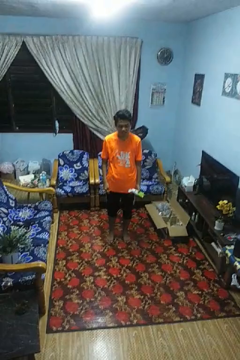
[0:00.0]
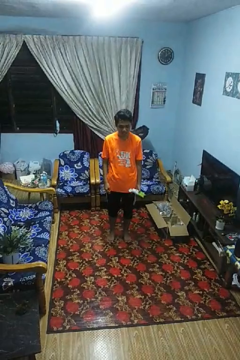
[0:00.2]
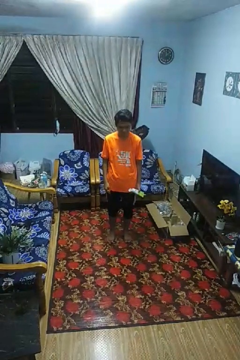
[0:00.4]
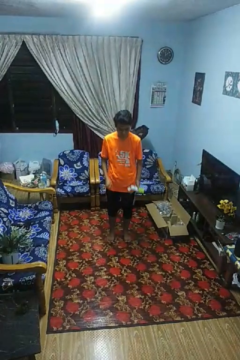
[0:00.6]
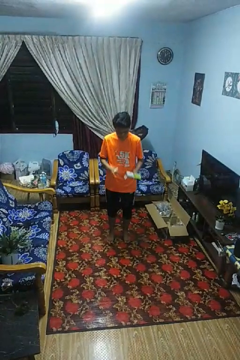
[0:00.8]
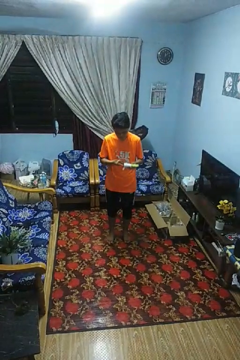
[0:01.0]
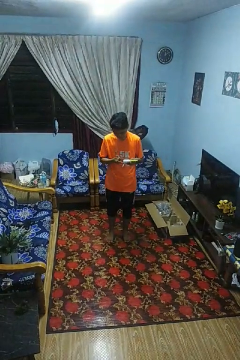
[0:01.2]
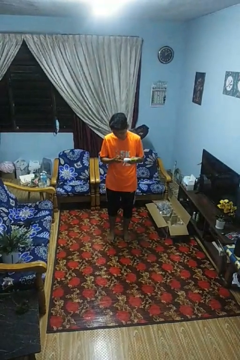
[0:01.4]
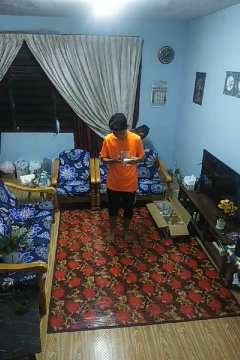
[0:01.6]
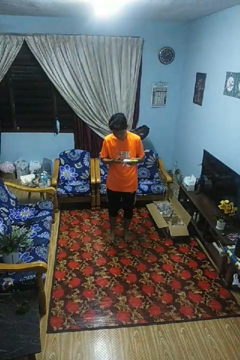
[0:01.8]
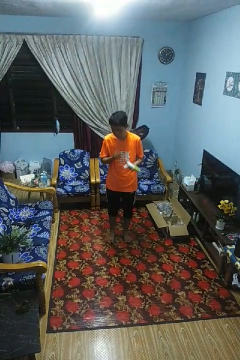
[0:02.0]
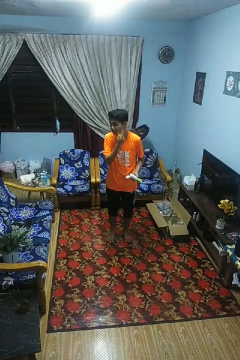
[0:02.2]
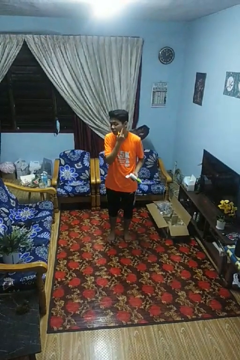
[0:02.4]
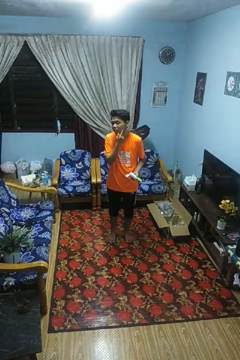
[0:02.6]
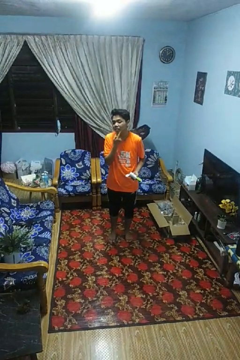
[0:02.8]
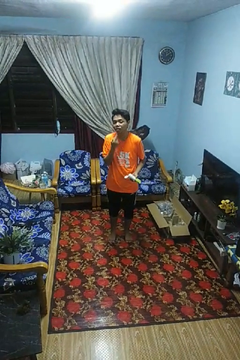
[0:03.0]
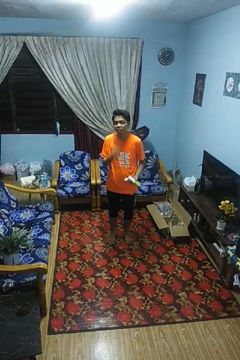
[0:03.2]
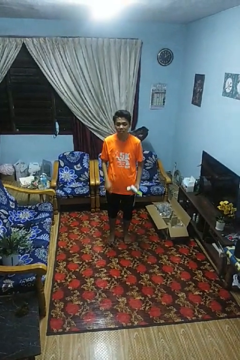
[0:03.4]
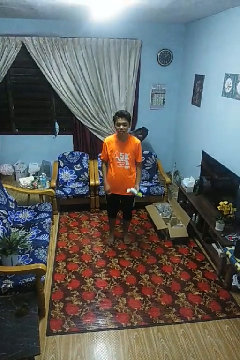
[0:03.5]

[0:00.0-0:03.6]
person applies shaving cream

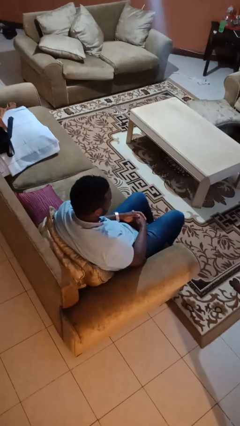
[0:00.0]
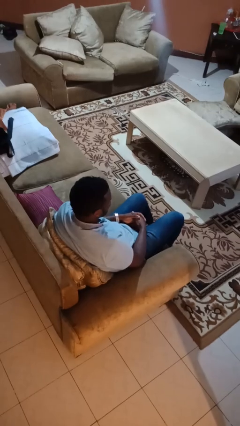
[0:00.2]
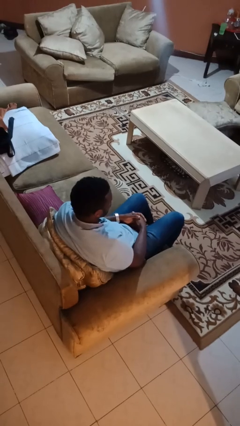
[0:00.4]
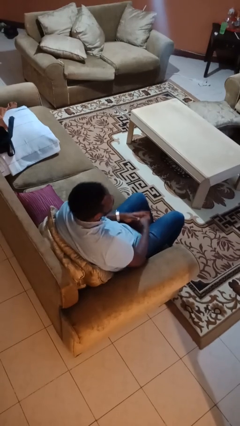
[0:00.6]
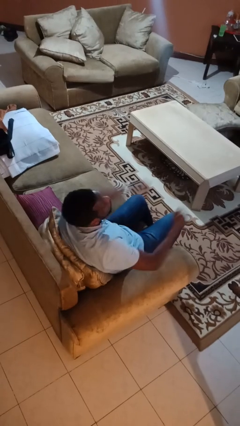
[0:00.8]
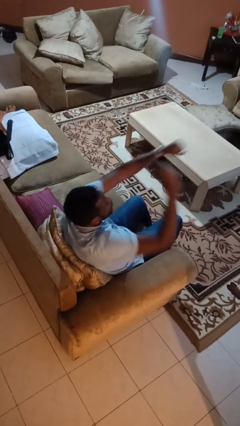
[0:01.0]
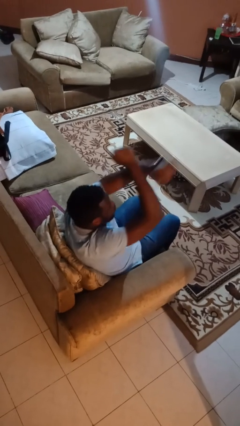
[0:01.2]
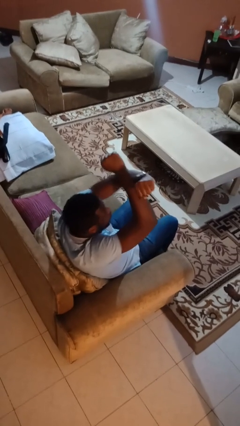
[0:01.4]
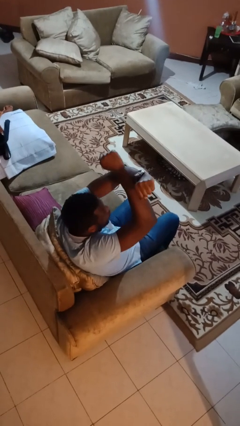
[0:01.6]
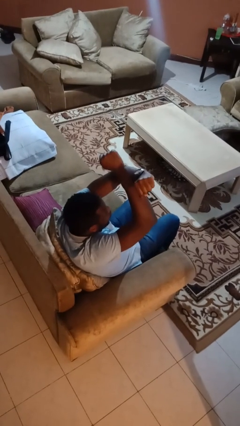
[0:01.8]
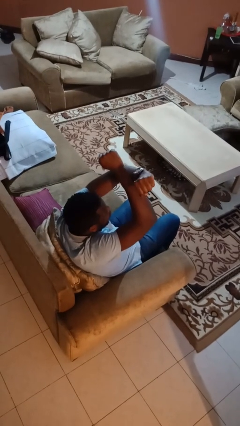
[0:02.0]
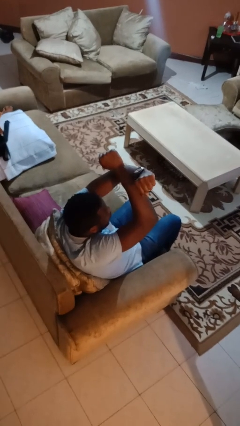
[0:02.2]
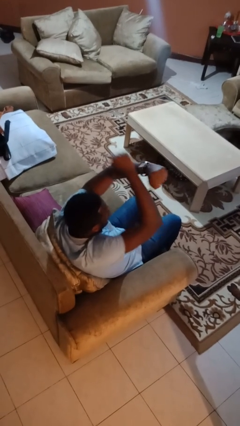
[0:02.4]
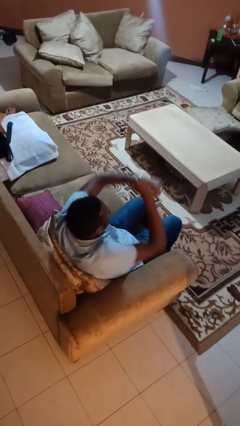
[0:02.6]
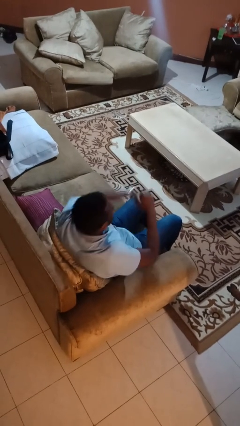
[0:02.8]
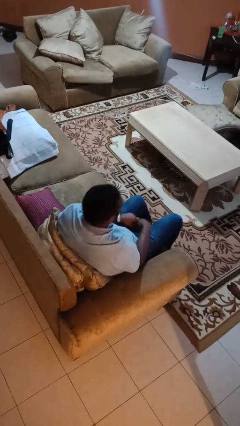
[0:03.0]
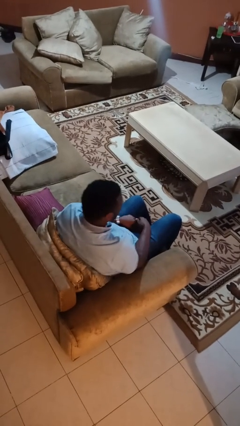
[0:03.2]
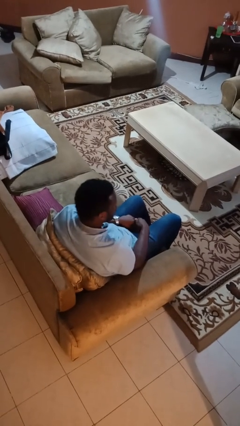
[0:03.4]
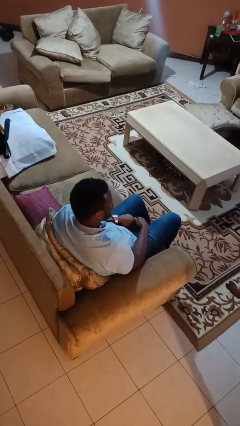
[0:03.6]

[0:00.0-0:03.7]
person gestures arms x

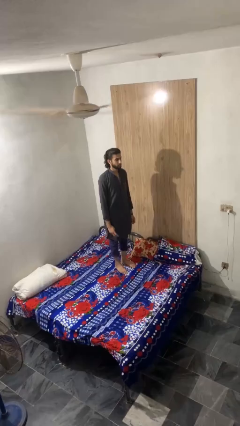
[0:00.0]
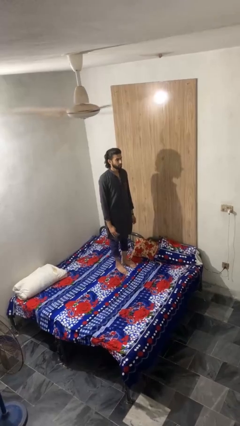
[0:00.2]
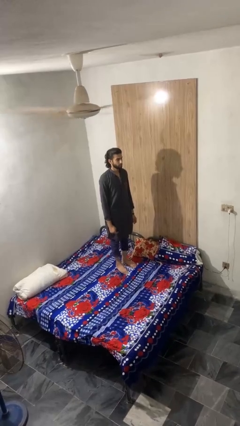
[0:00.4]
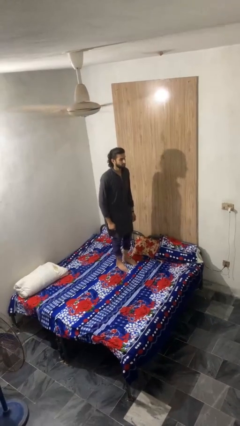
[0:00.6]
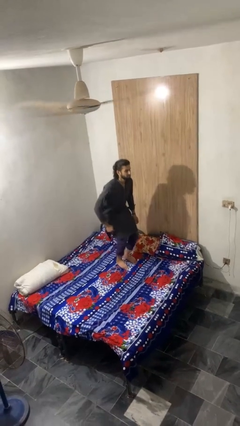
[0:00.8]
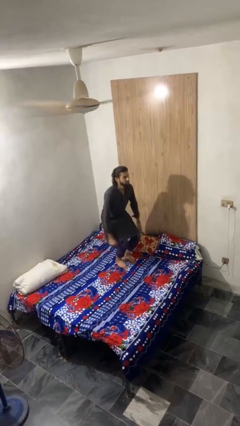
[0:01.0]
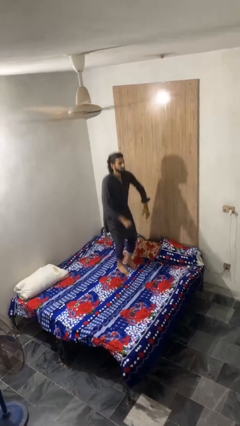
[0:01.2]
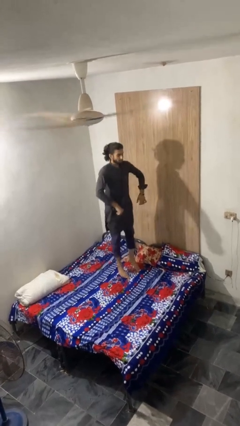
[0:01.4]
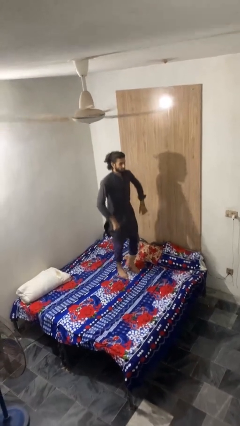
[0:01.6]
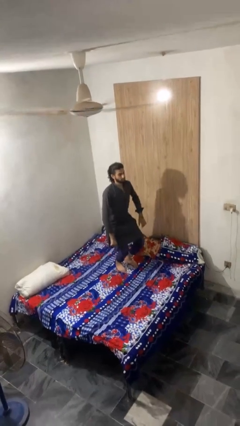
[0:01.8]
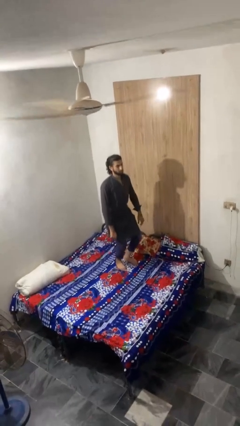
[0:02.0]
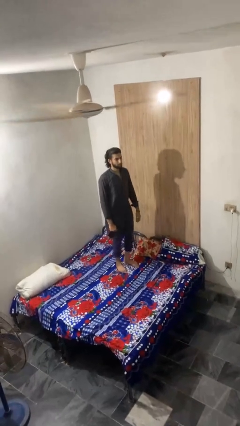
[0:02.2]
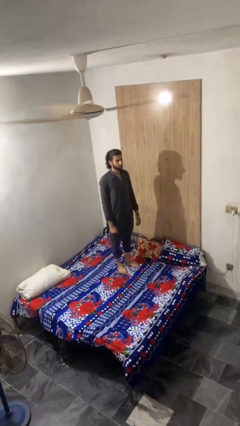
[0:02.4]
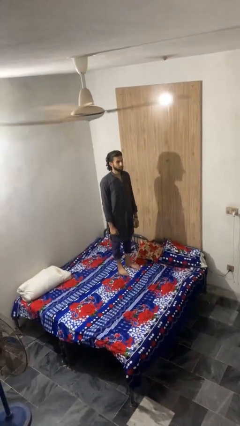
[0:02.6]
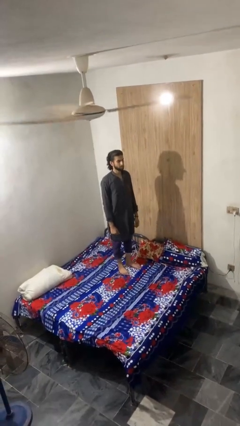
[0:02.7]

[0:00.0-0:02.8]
person jumps on bed

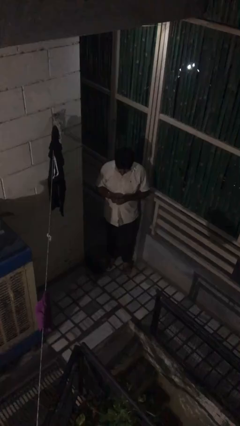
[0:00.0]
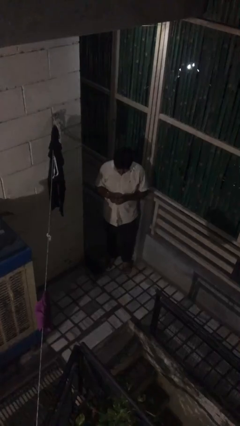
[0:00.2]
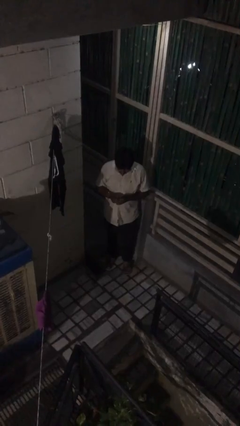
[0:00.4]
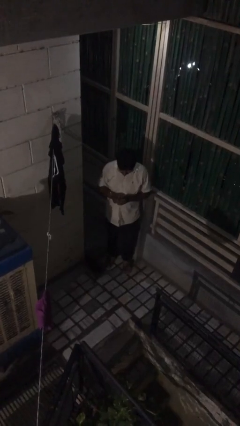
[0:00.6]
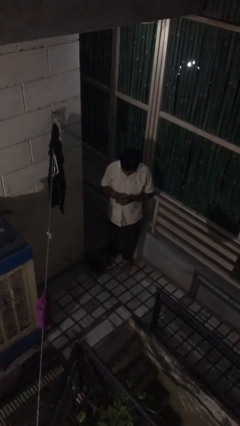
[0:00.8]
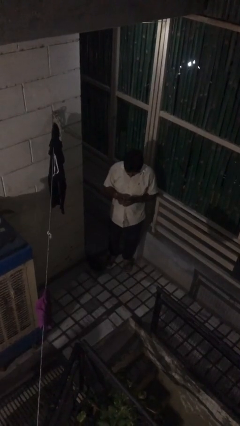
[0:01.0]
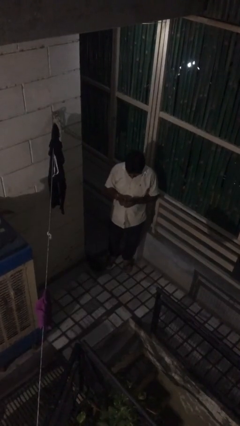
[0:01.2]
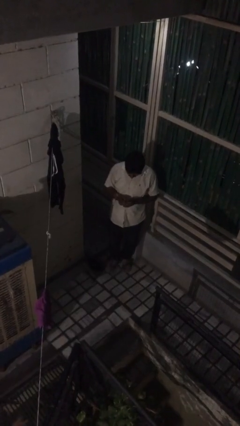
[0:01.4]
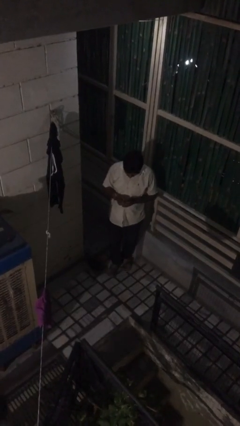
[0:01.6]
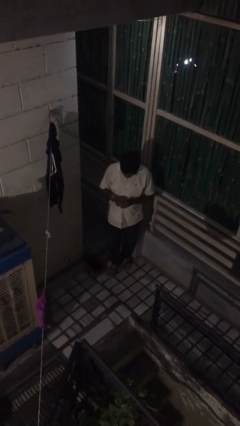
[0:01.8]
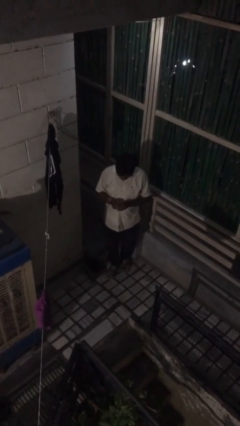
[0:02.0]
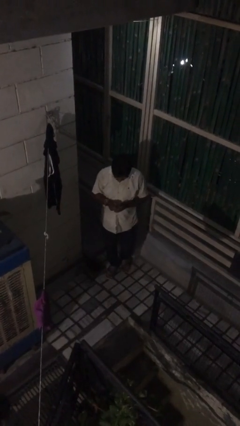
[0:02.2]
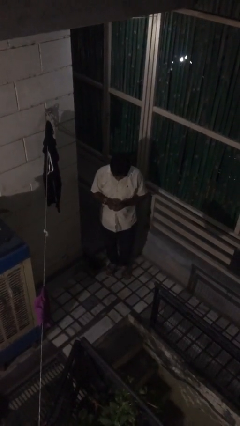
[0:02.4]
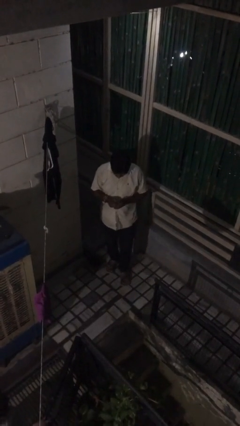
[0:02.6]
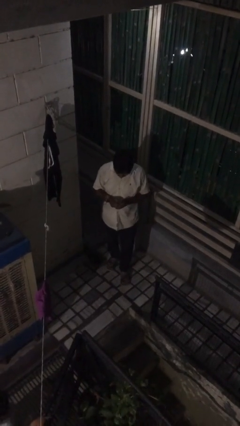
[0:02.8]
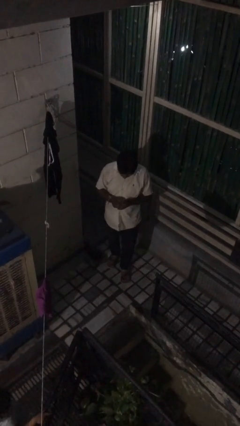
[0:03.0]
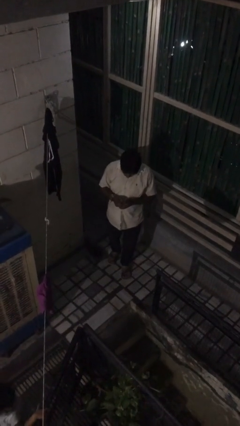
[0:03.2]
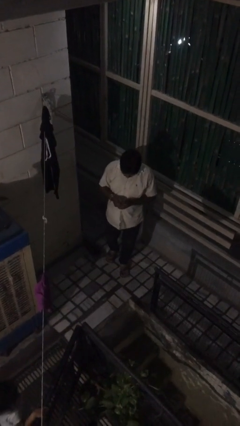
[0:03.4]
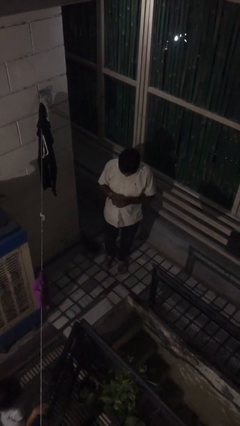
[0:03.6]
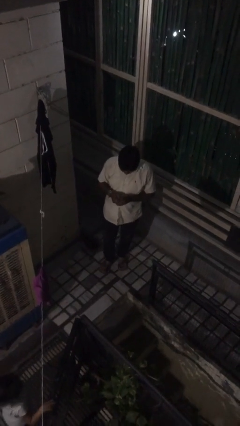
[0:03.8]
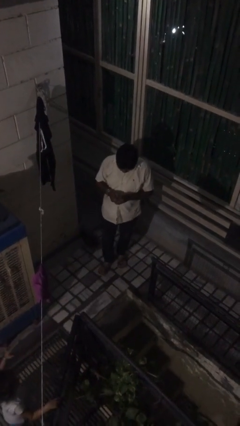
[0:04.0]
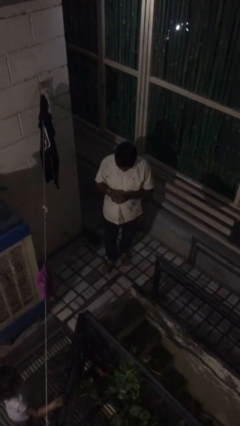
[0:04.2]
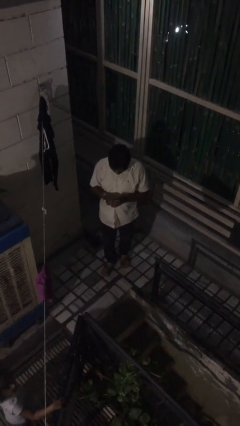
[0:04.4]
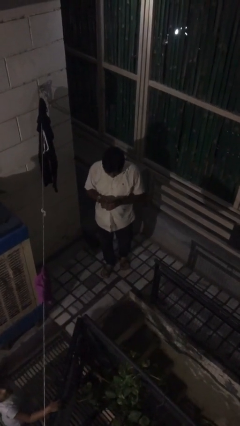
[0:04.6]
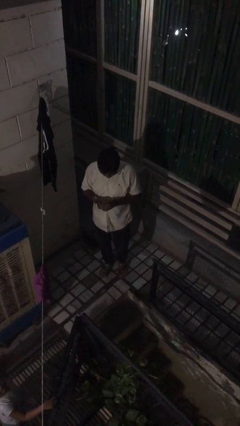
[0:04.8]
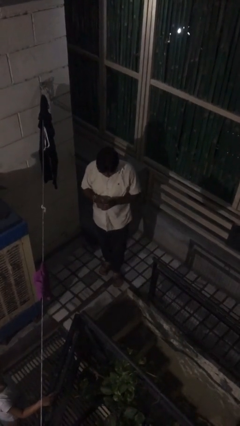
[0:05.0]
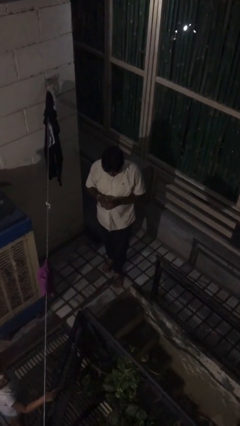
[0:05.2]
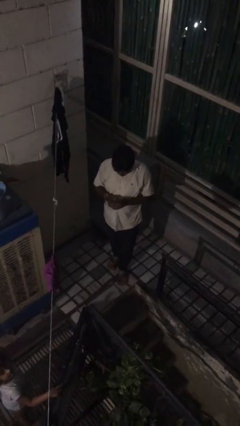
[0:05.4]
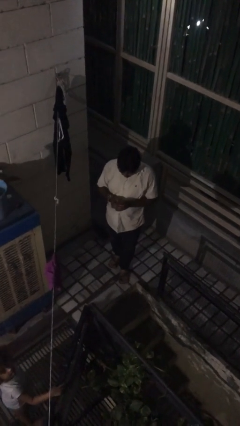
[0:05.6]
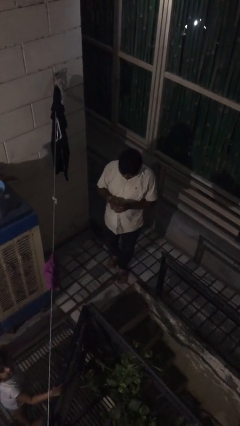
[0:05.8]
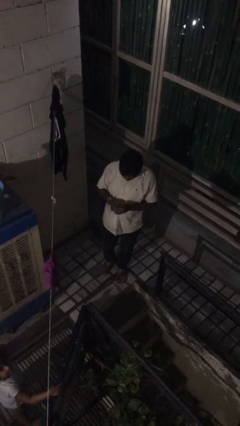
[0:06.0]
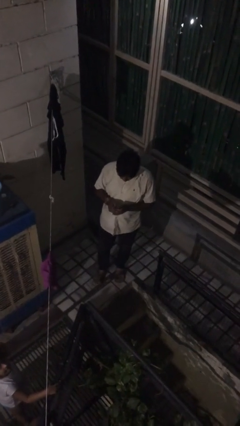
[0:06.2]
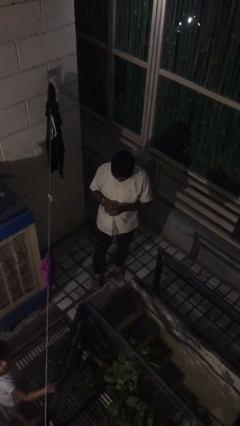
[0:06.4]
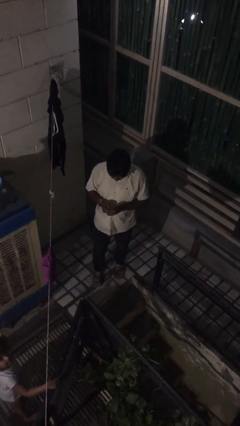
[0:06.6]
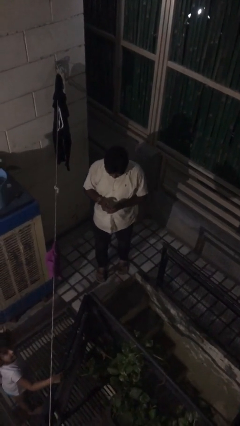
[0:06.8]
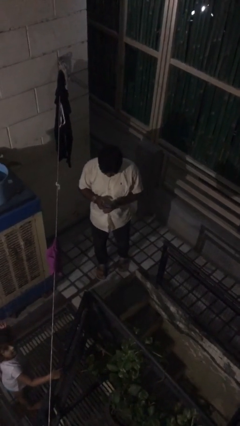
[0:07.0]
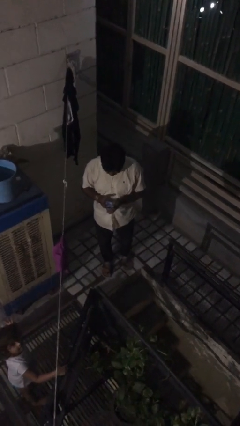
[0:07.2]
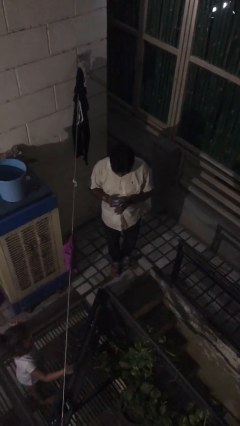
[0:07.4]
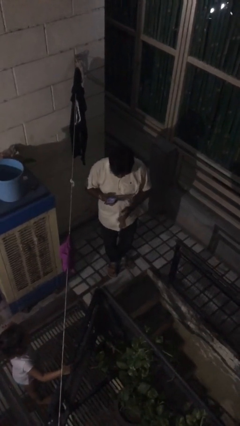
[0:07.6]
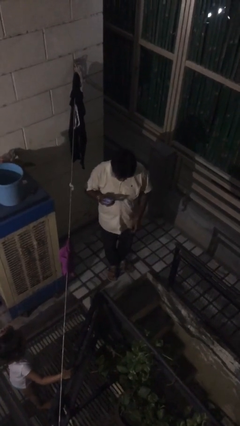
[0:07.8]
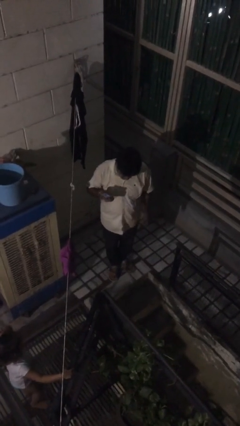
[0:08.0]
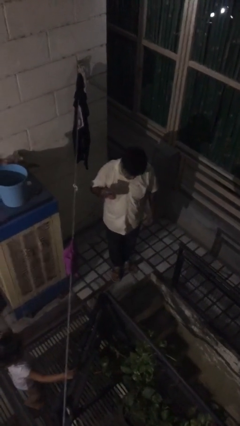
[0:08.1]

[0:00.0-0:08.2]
person texts on phone

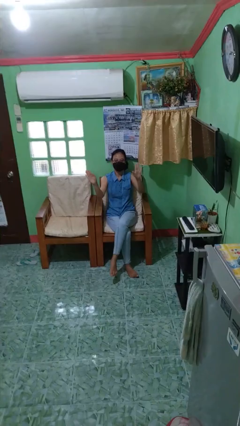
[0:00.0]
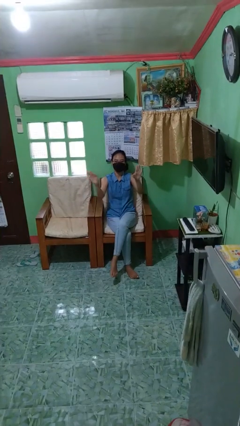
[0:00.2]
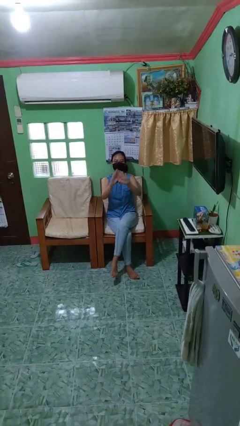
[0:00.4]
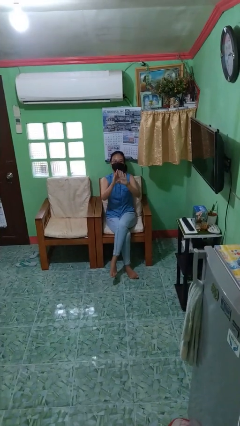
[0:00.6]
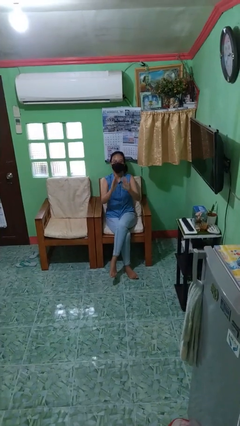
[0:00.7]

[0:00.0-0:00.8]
person gestures zoom out
